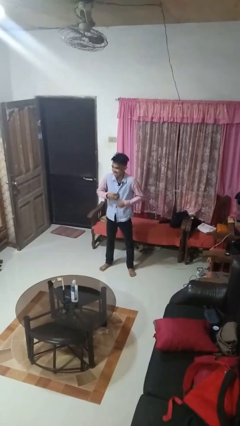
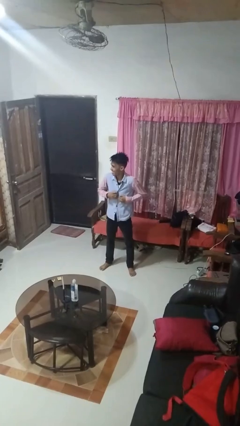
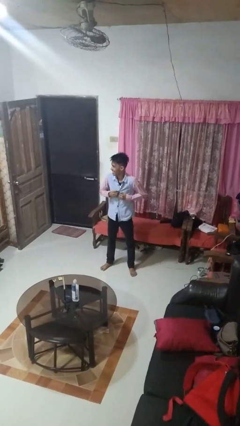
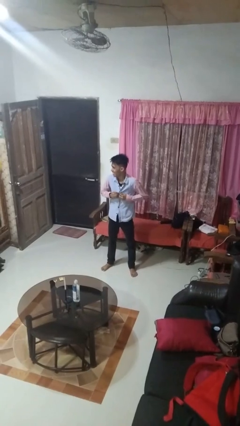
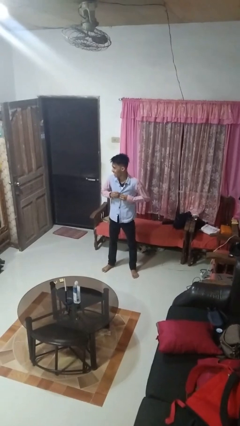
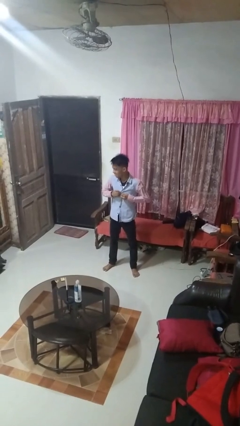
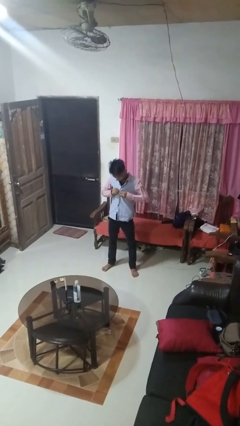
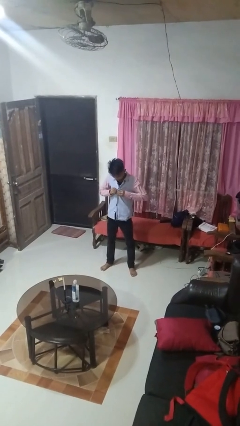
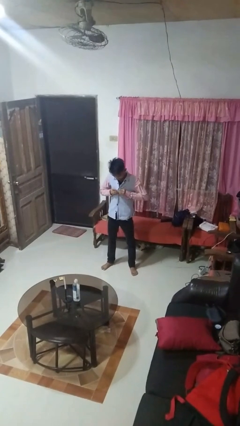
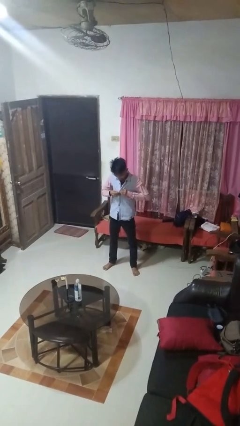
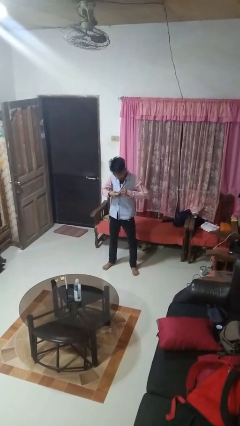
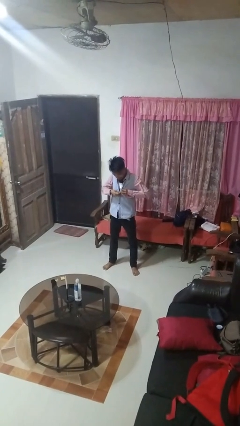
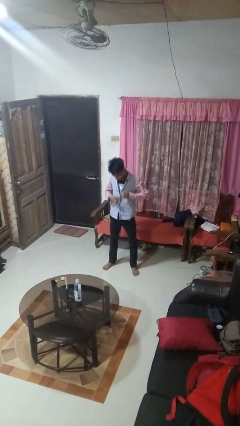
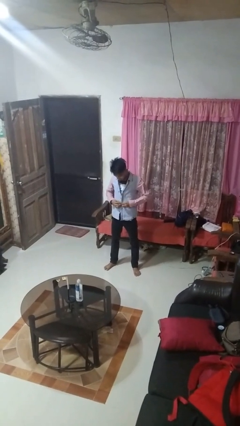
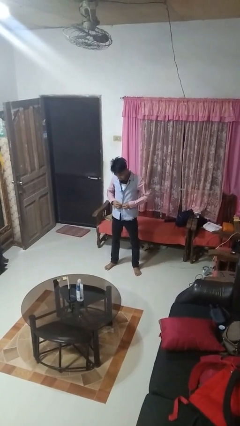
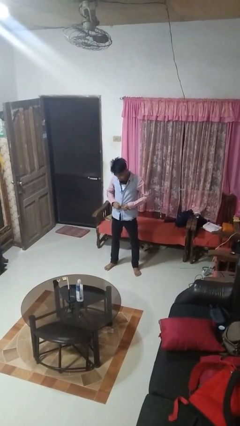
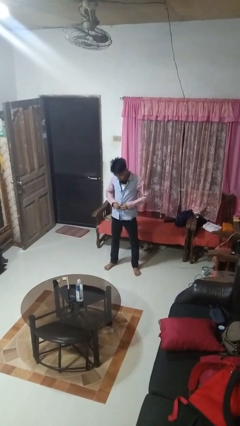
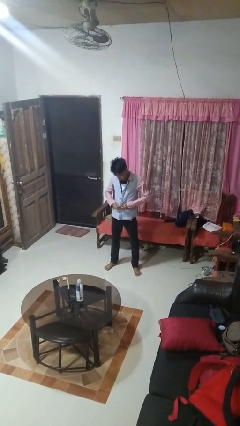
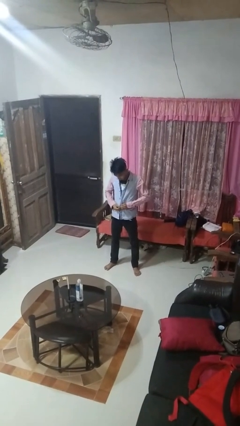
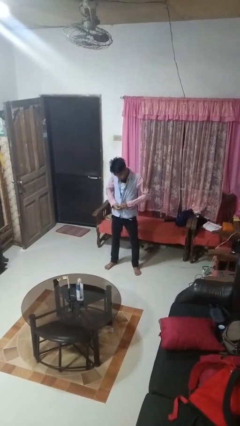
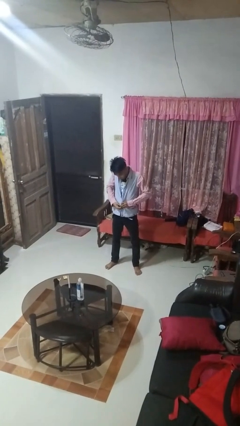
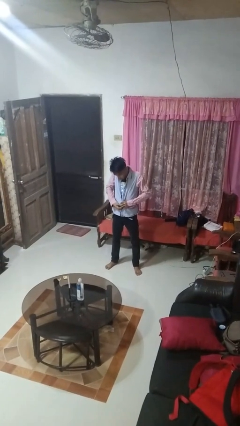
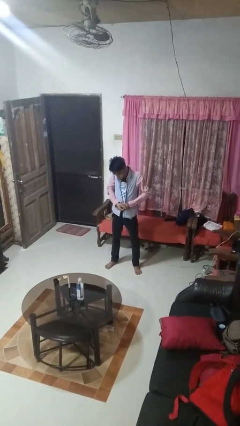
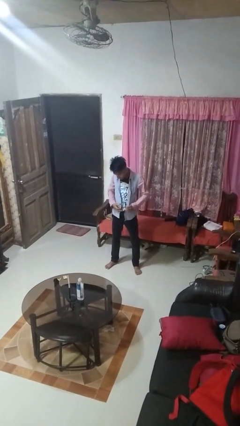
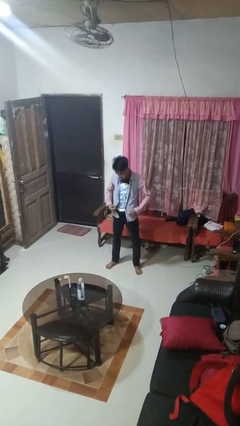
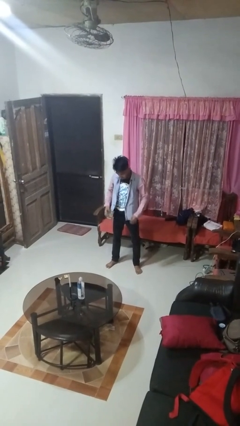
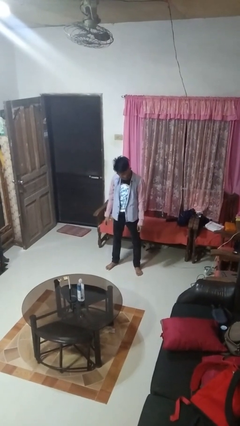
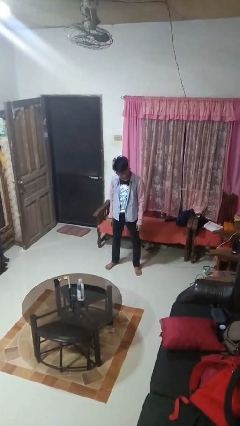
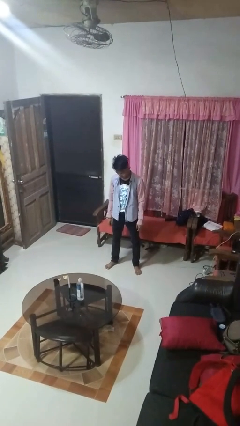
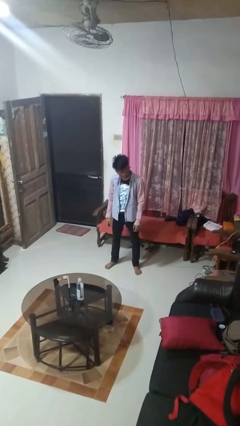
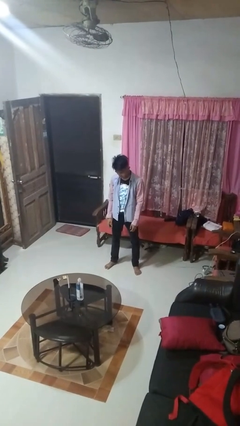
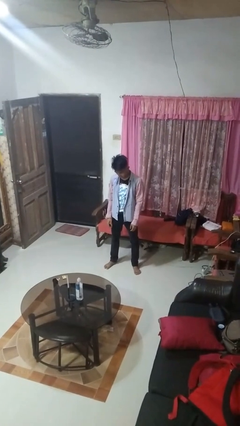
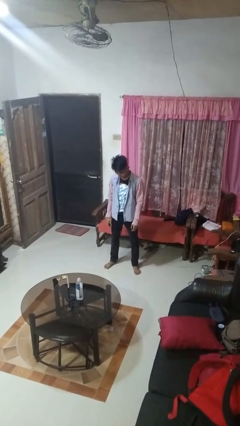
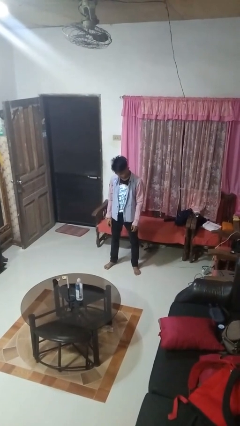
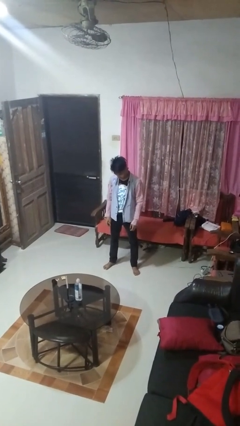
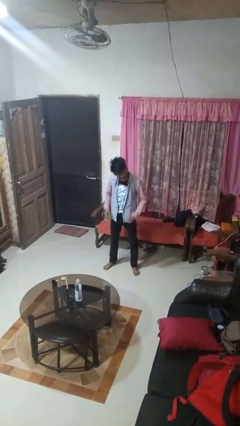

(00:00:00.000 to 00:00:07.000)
person unbuttons shirt

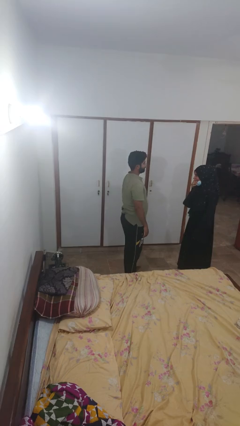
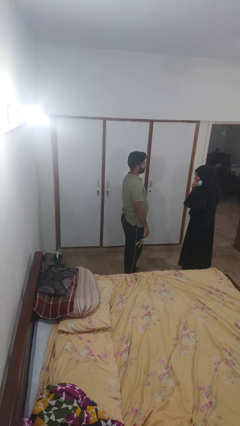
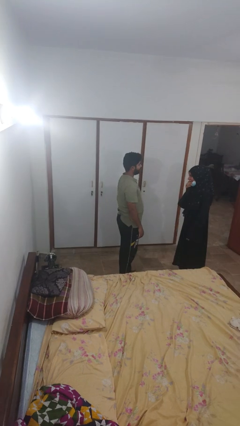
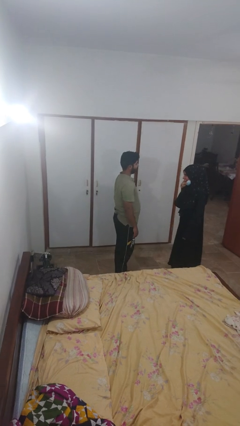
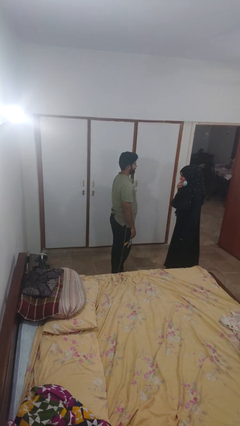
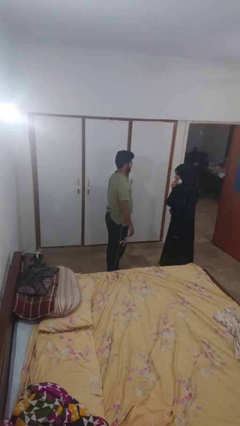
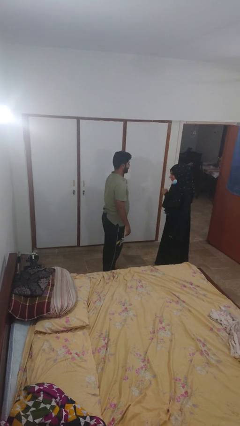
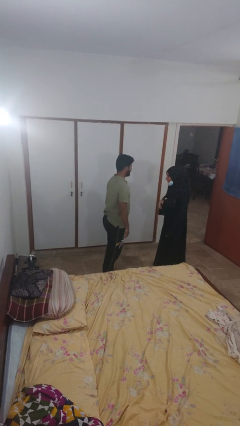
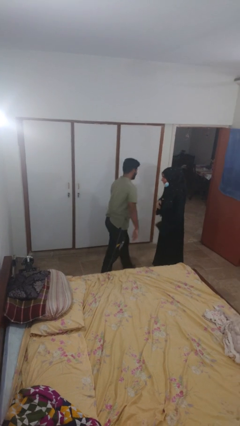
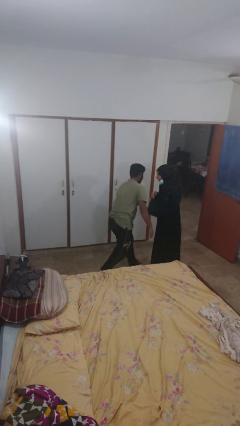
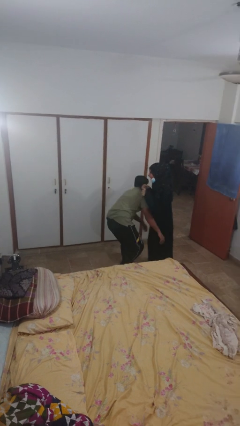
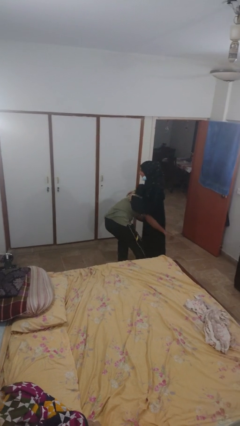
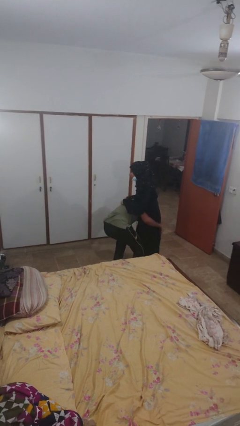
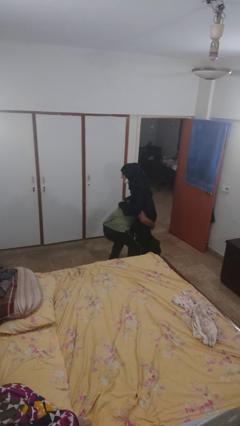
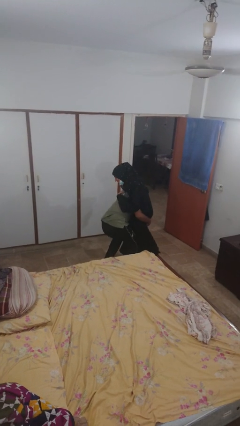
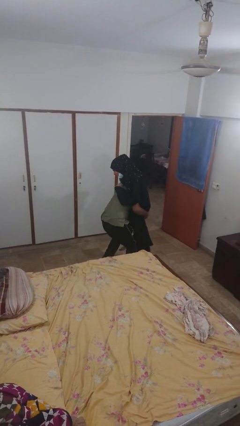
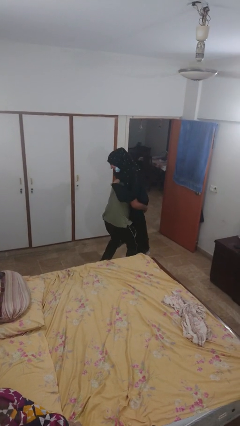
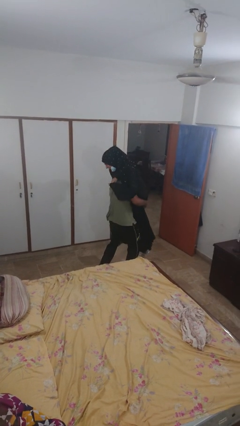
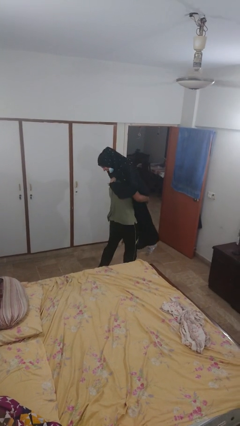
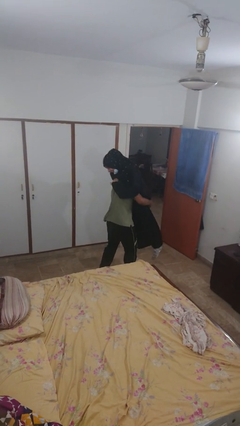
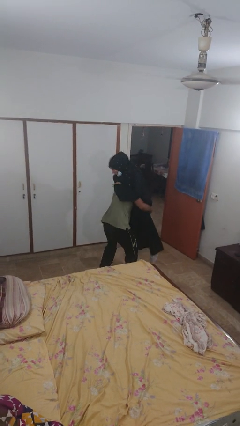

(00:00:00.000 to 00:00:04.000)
person carries person over shoulder

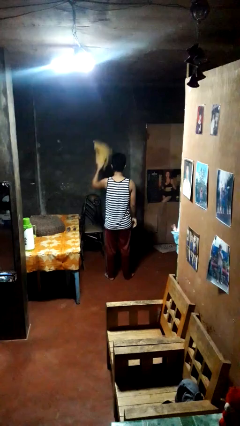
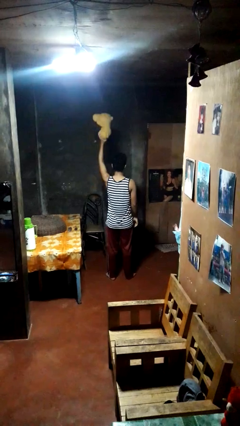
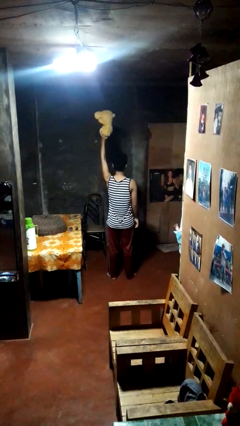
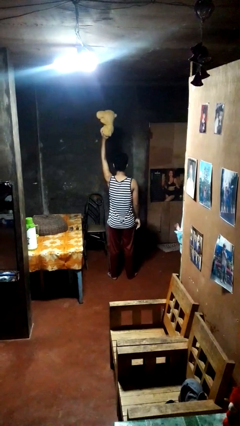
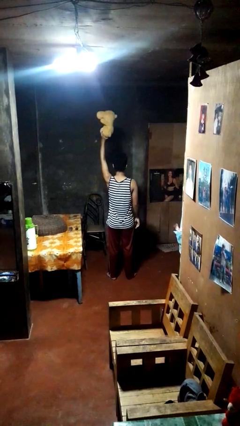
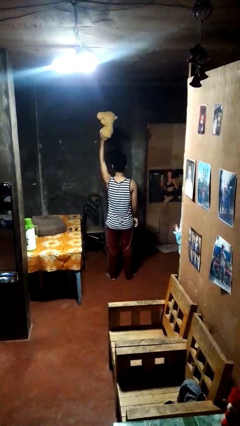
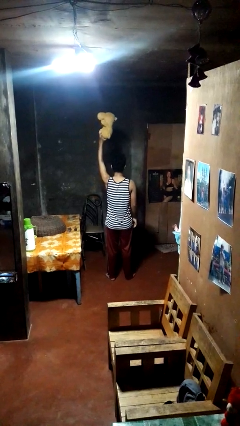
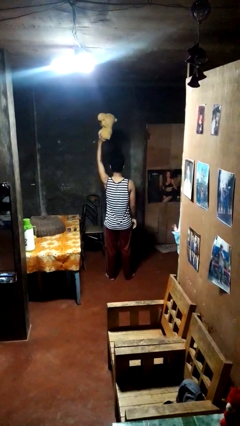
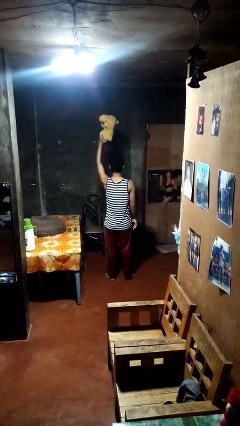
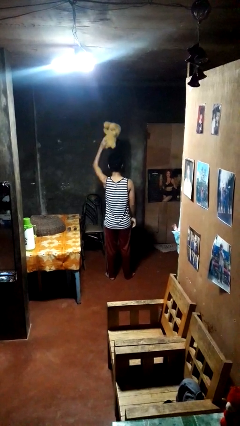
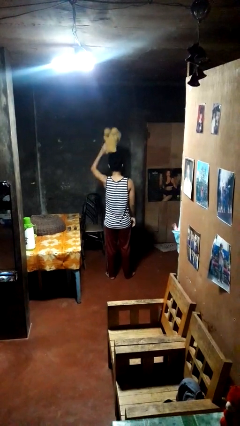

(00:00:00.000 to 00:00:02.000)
person holds object above head

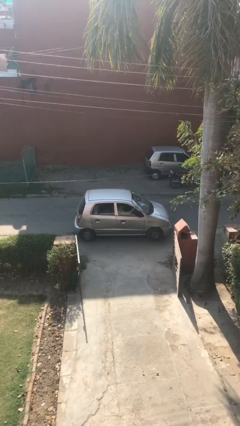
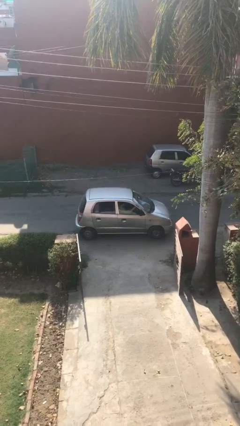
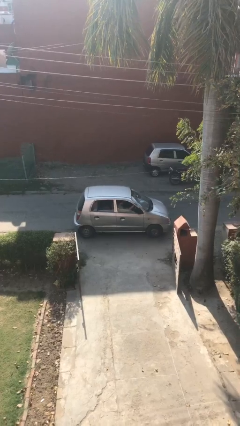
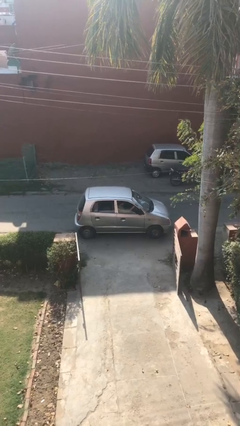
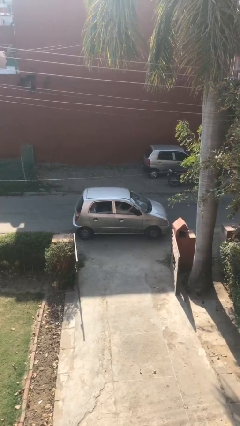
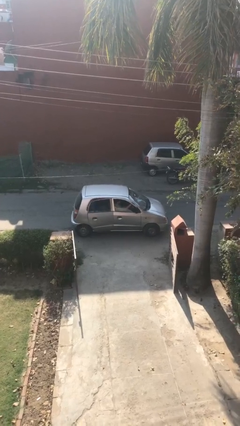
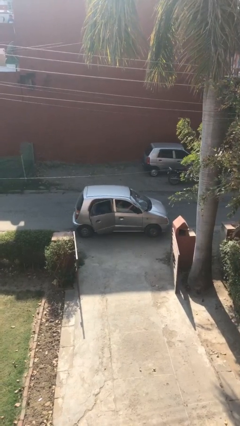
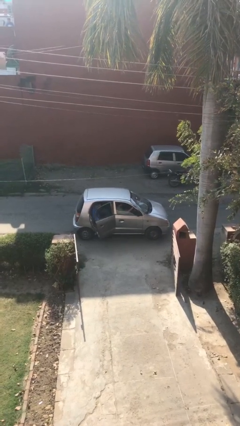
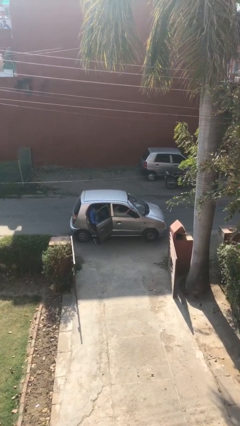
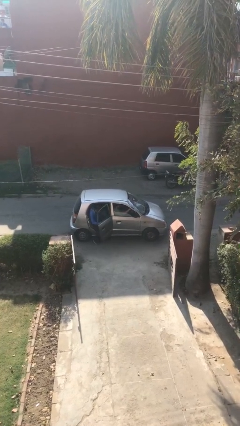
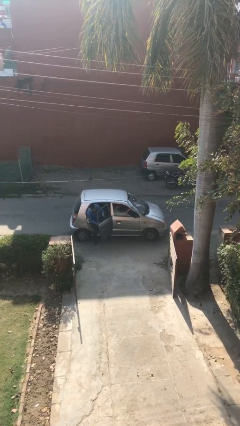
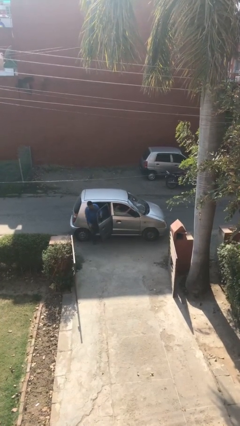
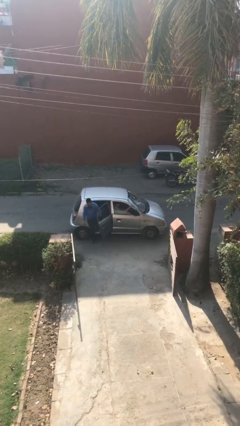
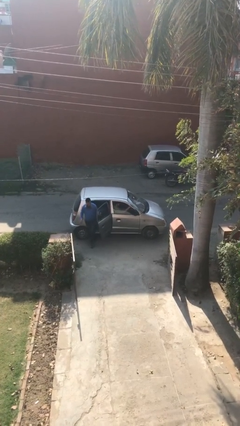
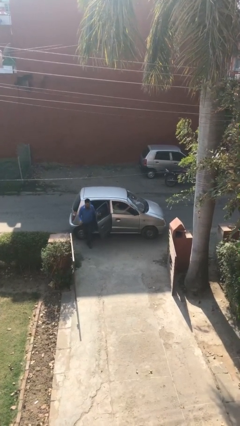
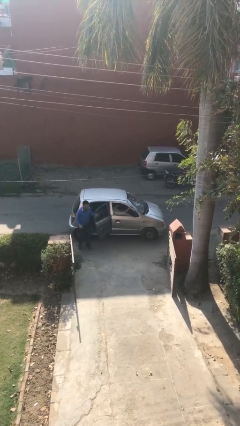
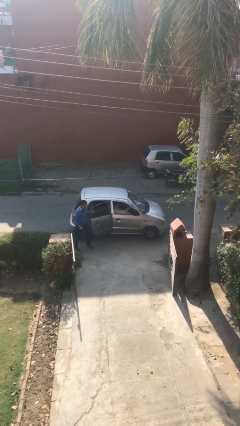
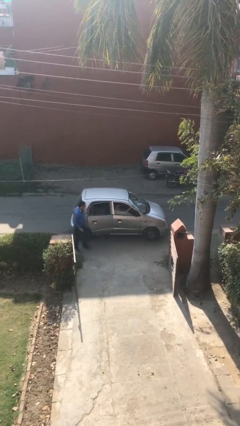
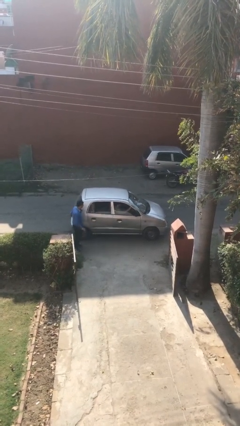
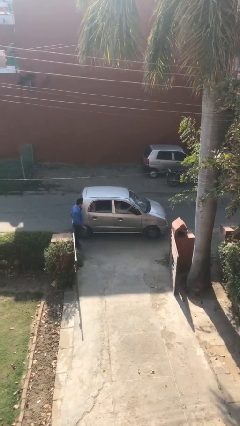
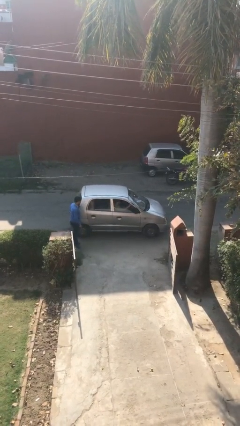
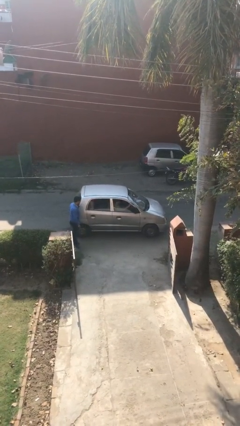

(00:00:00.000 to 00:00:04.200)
car drops off person

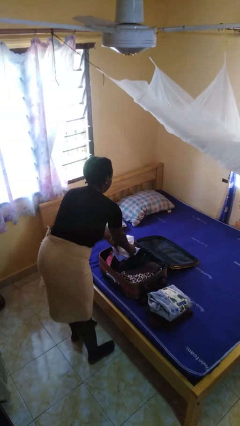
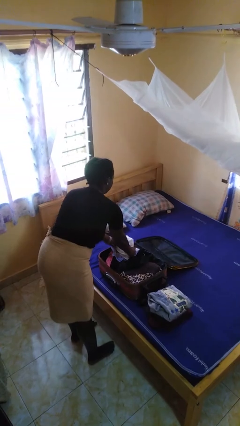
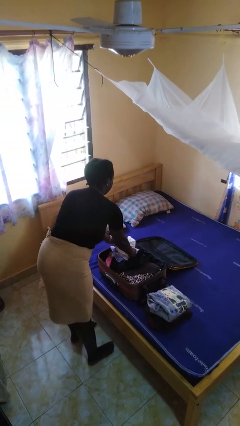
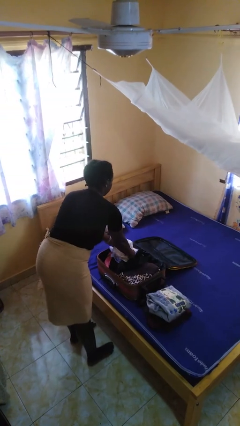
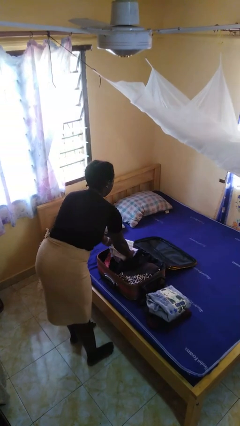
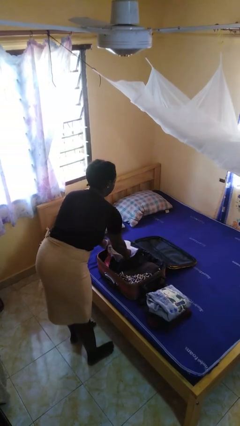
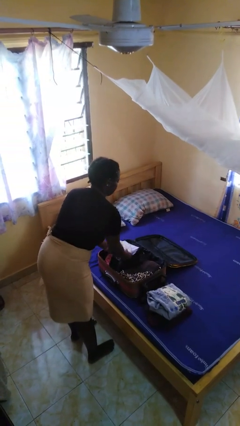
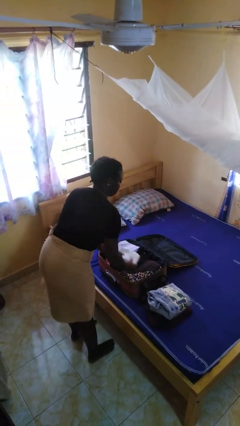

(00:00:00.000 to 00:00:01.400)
person unloads clothes from suitcase
